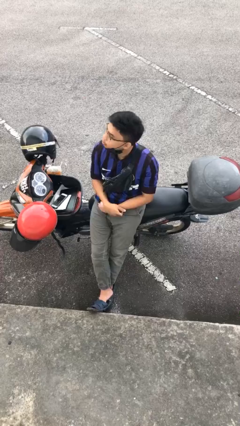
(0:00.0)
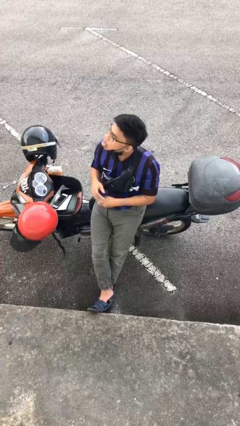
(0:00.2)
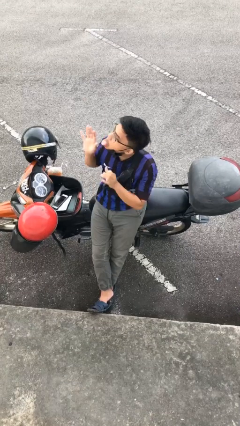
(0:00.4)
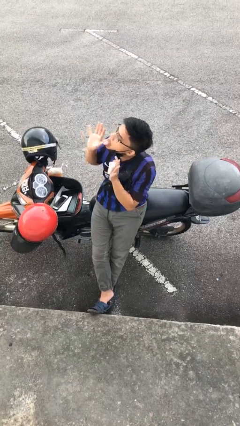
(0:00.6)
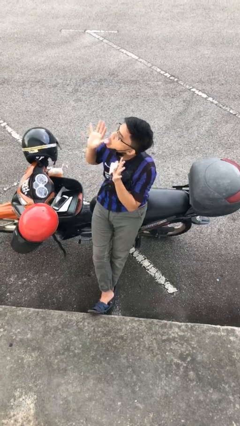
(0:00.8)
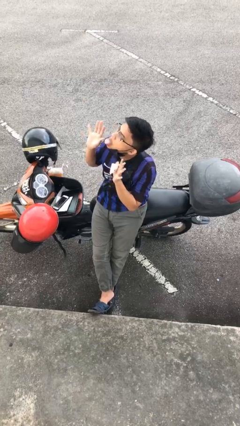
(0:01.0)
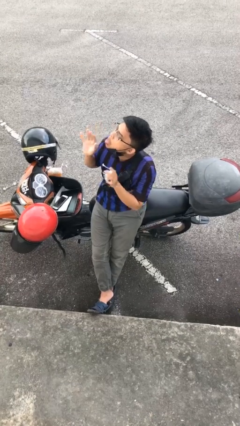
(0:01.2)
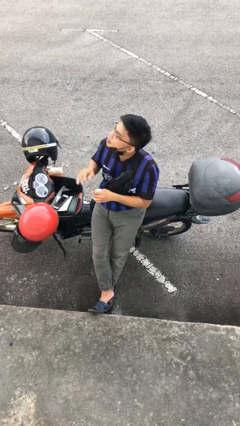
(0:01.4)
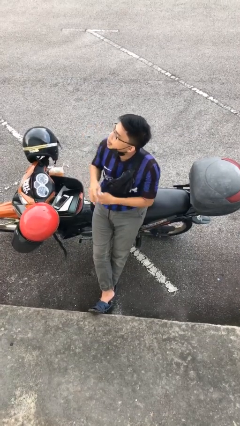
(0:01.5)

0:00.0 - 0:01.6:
person sticks out tongue

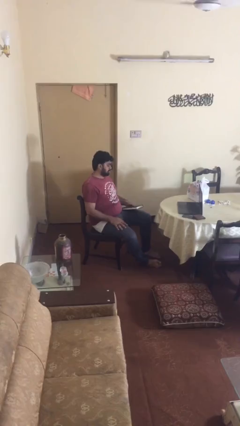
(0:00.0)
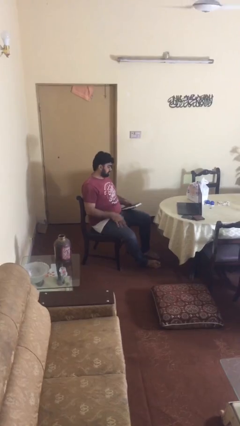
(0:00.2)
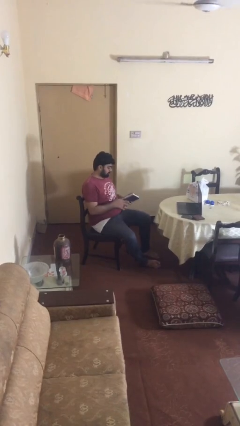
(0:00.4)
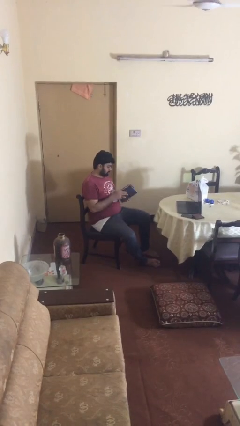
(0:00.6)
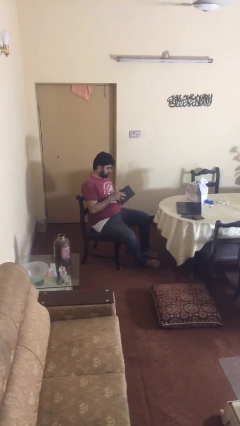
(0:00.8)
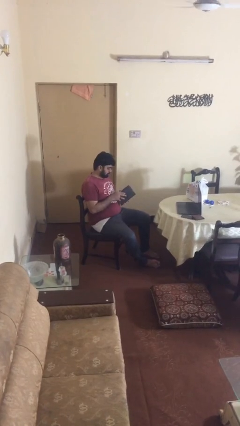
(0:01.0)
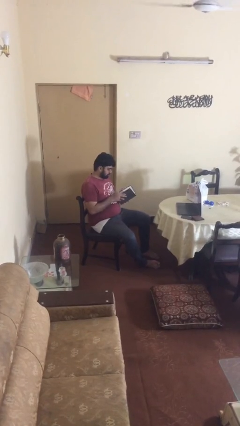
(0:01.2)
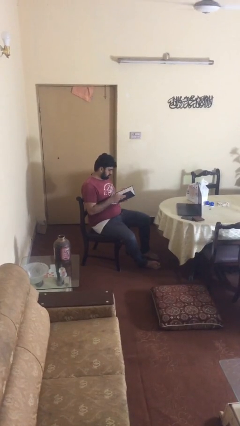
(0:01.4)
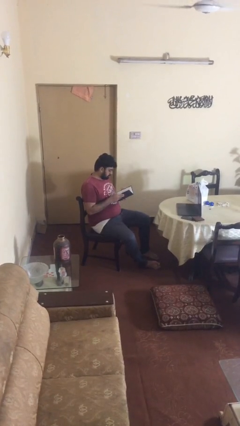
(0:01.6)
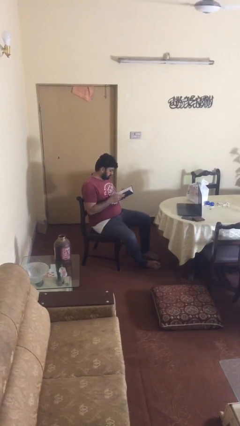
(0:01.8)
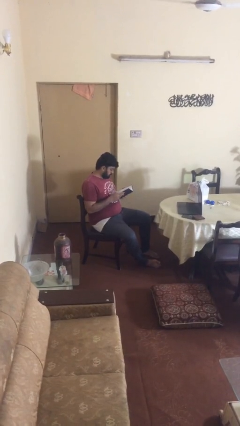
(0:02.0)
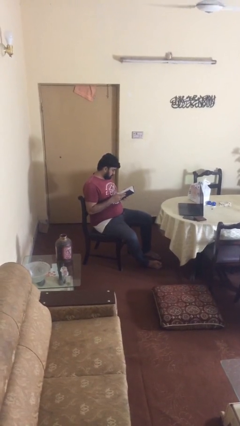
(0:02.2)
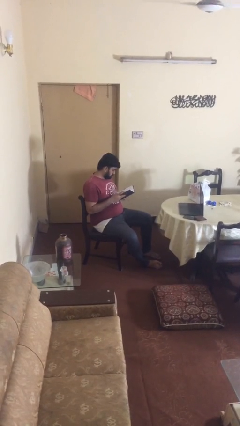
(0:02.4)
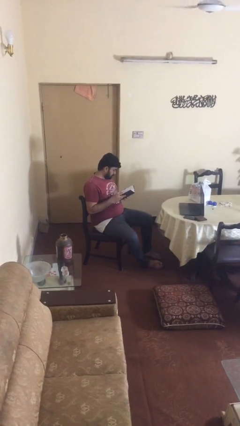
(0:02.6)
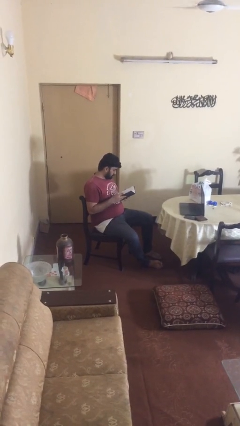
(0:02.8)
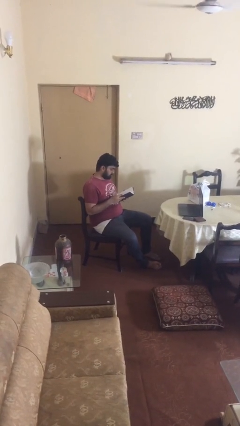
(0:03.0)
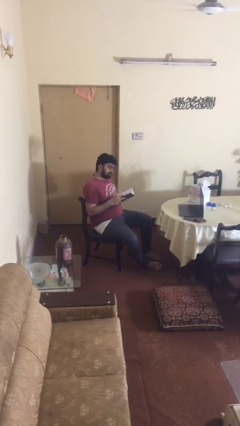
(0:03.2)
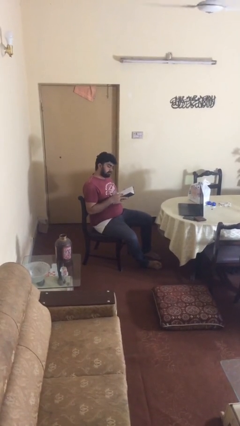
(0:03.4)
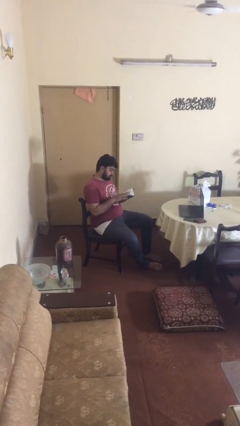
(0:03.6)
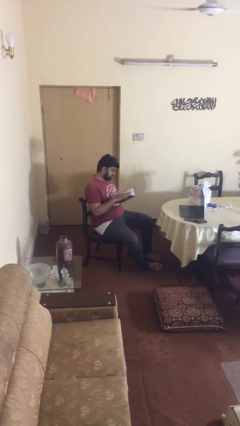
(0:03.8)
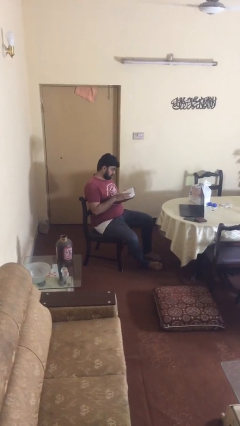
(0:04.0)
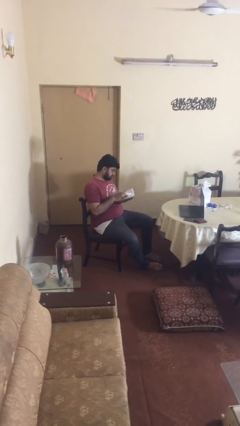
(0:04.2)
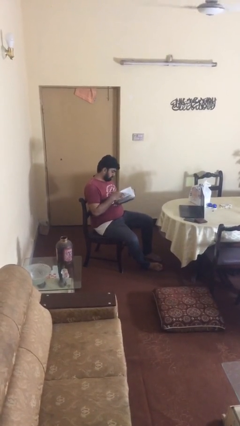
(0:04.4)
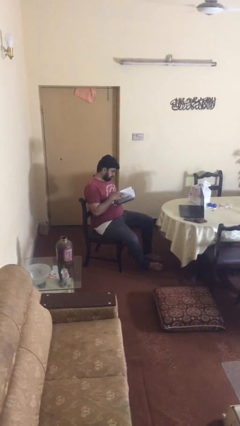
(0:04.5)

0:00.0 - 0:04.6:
person reads document

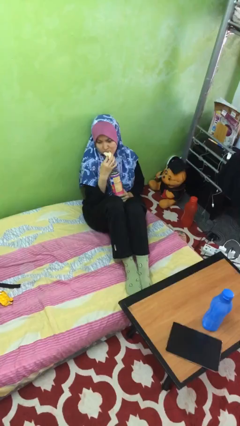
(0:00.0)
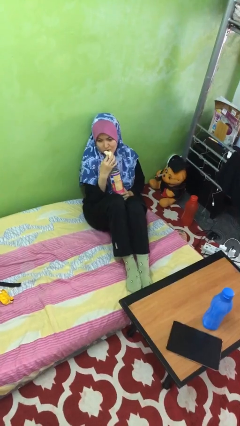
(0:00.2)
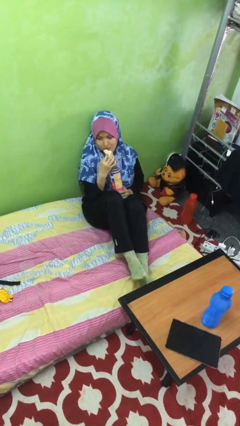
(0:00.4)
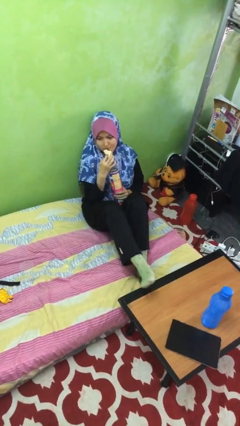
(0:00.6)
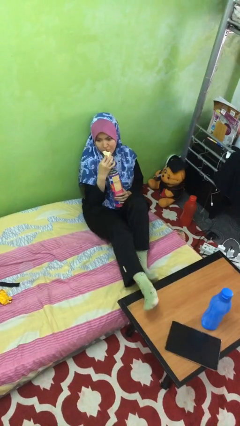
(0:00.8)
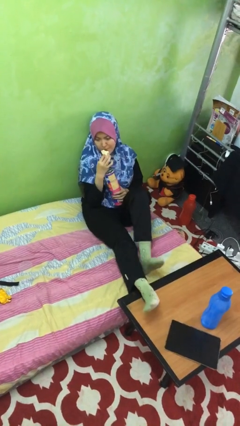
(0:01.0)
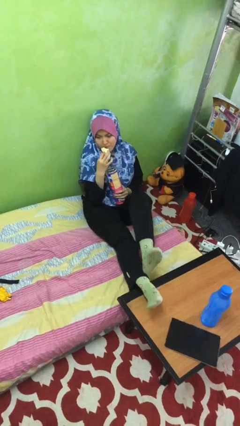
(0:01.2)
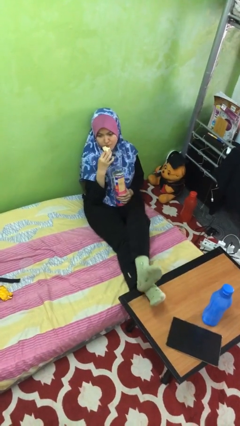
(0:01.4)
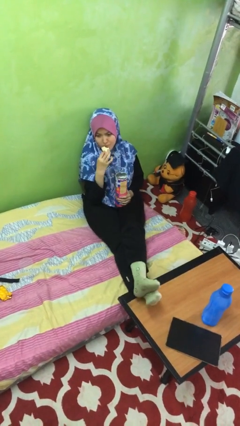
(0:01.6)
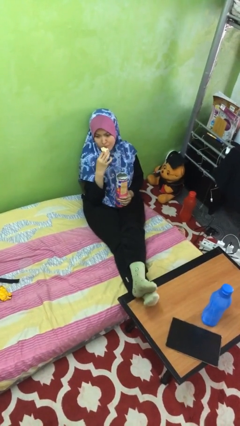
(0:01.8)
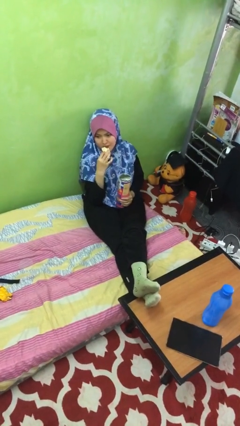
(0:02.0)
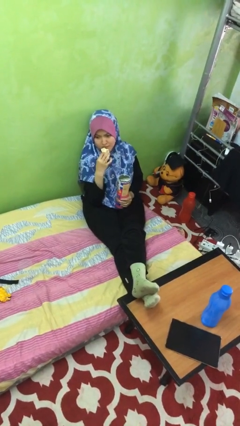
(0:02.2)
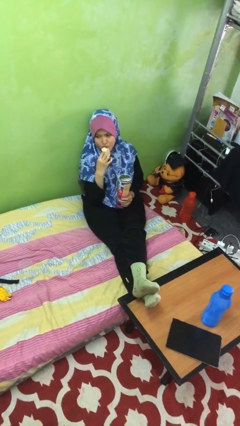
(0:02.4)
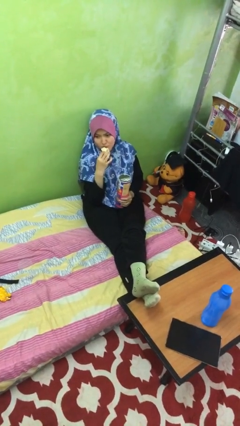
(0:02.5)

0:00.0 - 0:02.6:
person puts feet up

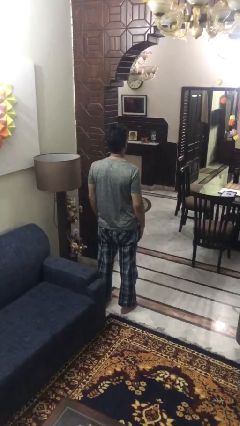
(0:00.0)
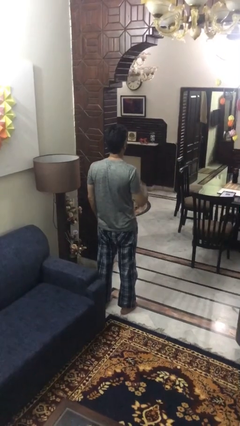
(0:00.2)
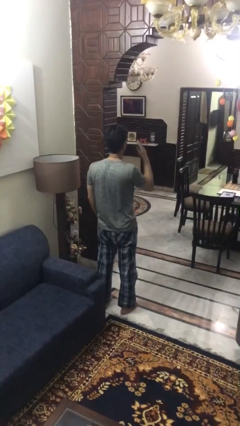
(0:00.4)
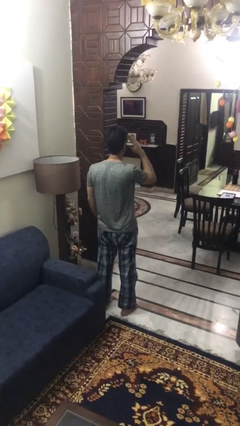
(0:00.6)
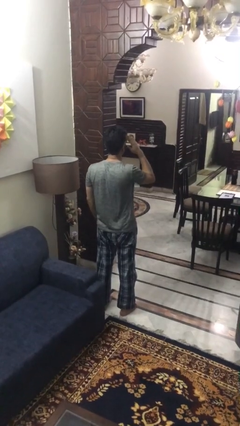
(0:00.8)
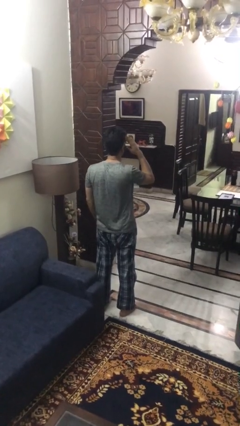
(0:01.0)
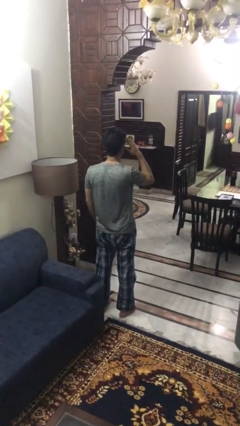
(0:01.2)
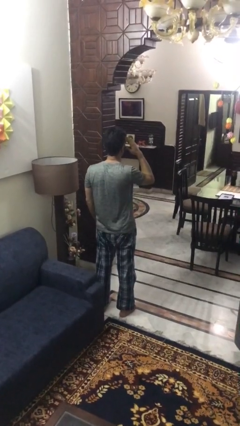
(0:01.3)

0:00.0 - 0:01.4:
person salutes

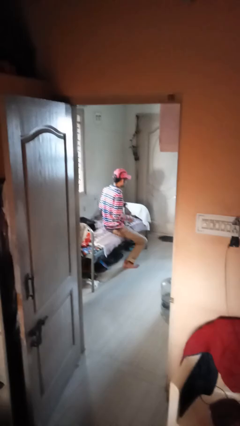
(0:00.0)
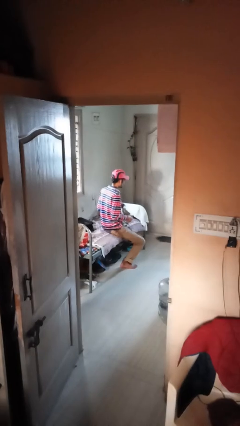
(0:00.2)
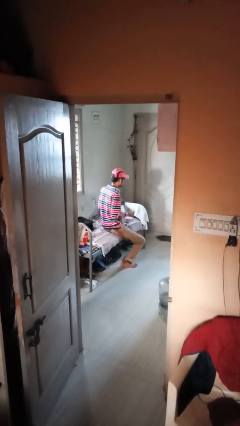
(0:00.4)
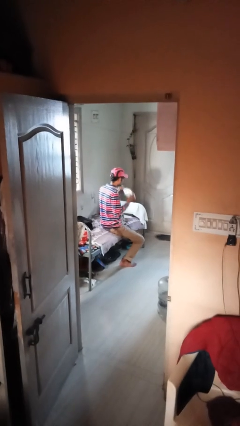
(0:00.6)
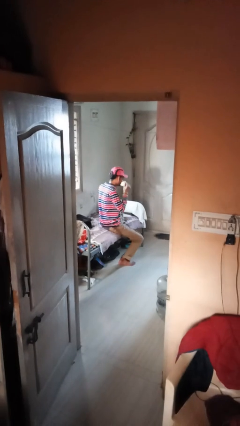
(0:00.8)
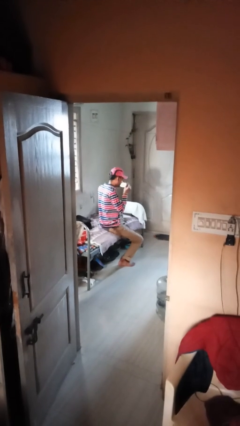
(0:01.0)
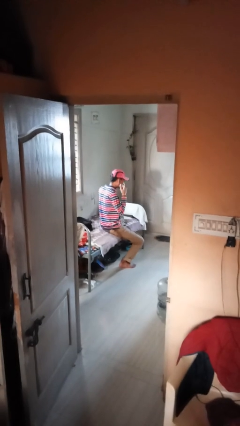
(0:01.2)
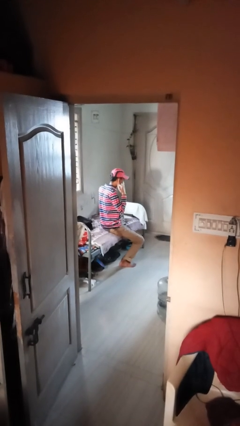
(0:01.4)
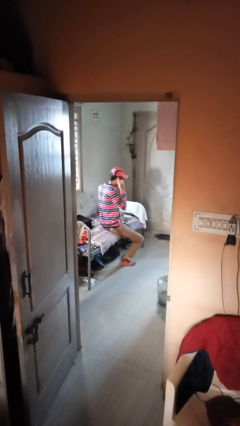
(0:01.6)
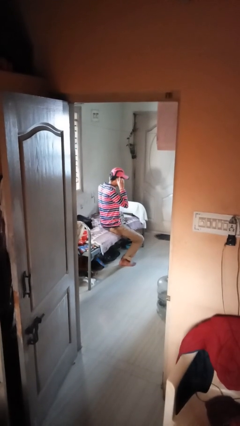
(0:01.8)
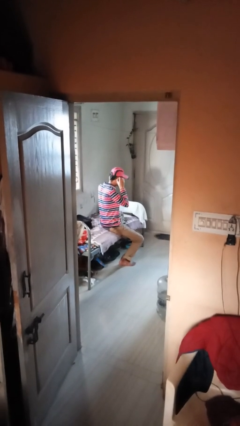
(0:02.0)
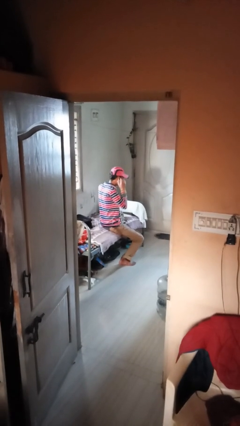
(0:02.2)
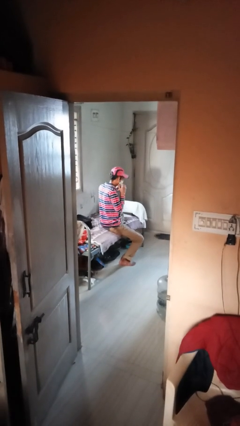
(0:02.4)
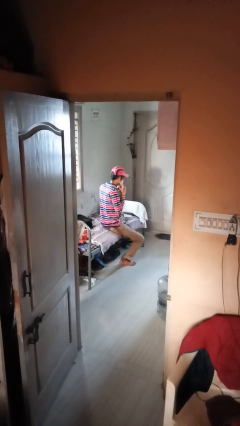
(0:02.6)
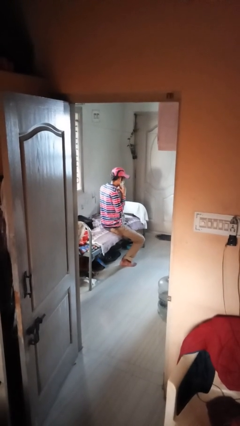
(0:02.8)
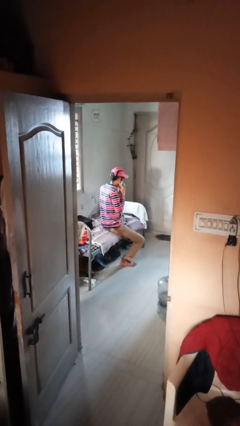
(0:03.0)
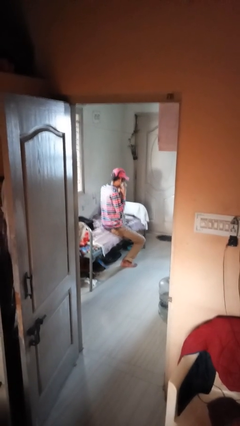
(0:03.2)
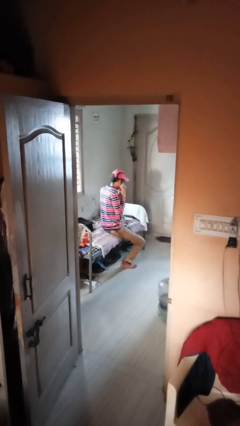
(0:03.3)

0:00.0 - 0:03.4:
person puts on facemask

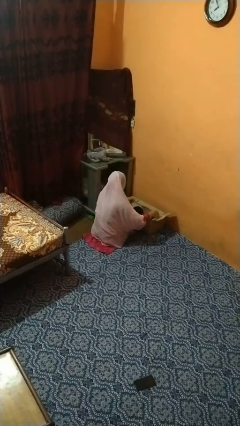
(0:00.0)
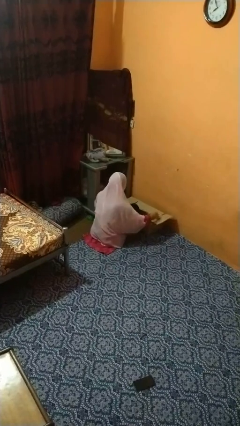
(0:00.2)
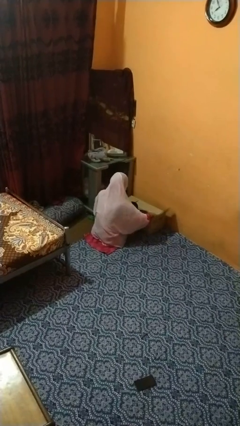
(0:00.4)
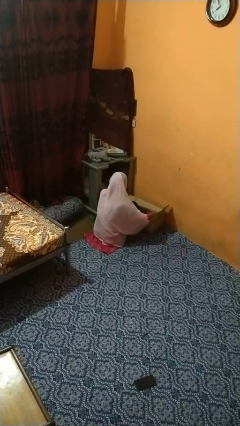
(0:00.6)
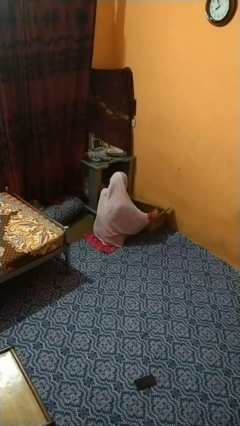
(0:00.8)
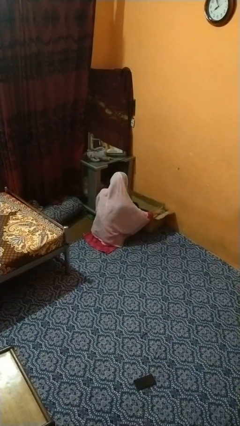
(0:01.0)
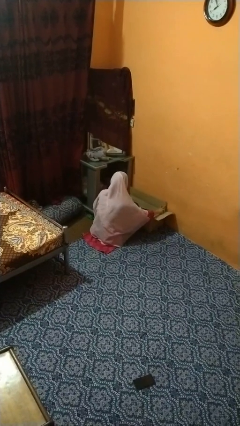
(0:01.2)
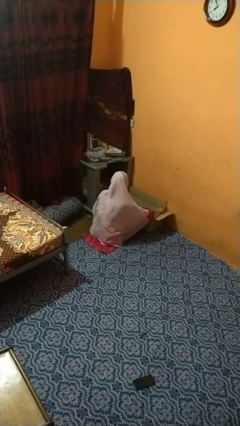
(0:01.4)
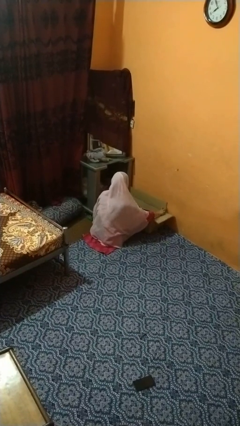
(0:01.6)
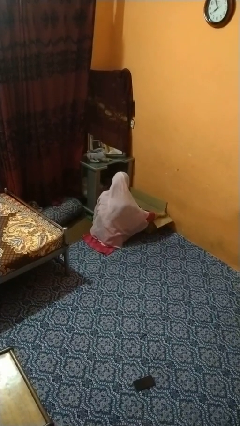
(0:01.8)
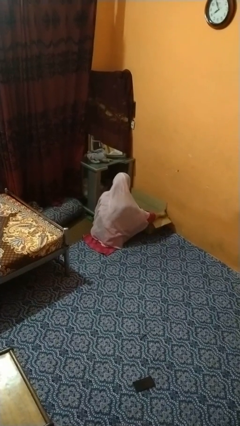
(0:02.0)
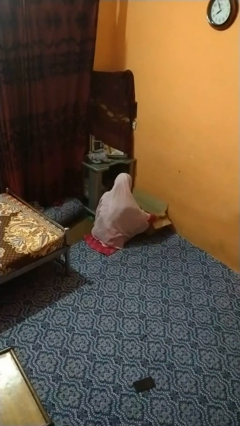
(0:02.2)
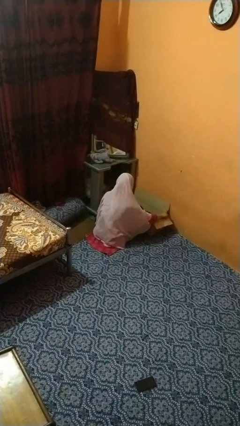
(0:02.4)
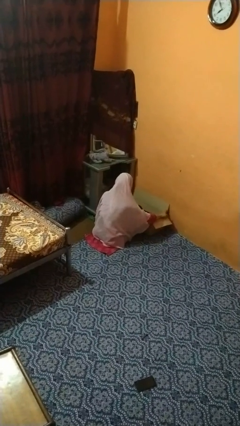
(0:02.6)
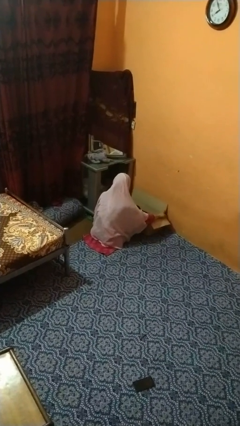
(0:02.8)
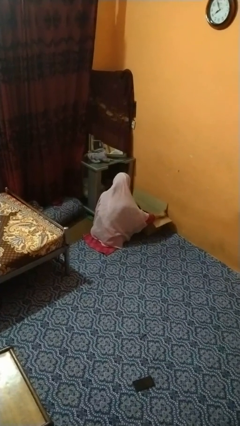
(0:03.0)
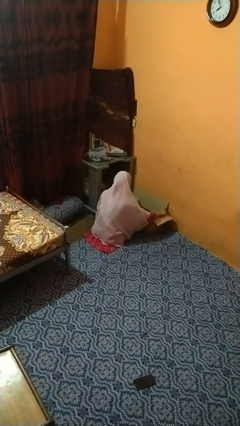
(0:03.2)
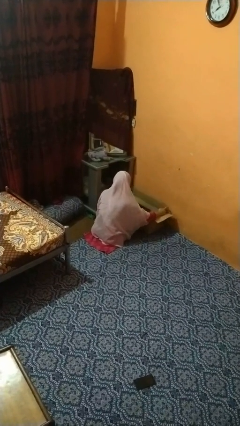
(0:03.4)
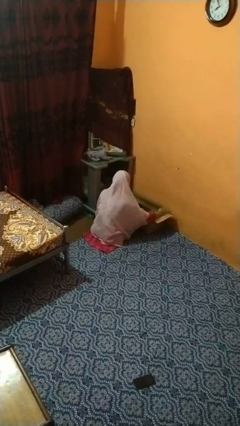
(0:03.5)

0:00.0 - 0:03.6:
person opens box

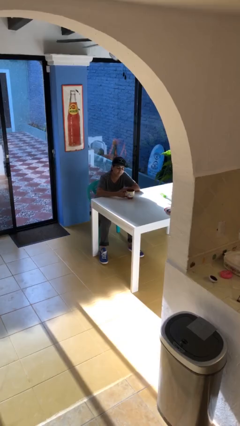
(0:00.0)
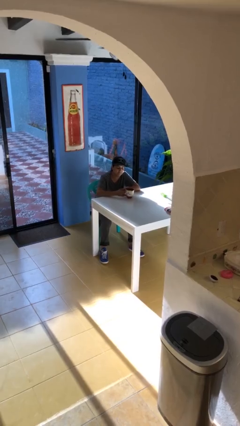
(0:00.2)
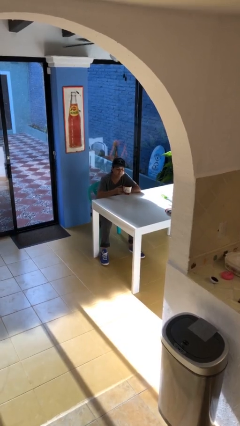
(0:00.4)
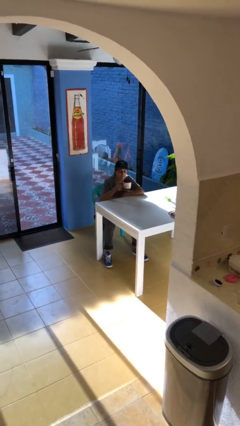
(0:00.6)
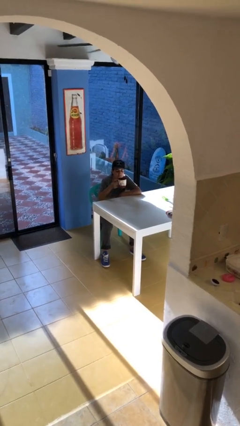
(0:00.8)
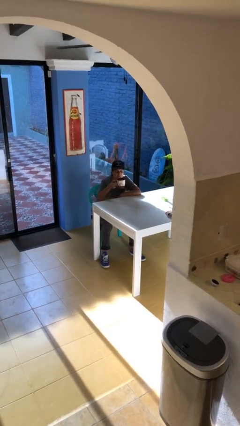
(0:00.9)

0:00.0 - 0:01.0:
person picks up object from table
